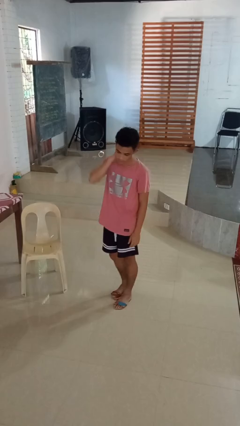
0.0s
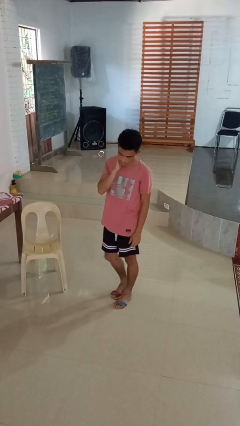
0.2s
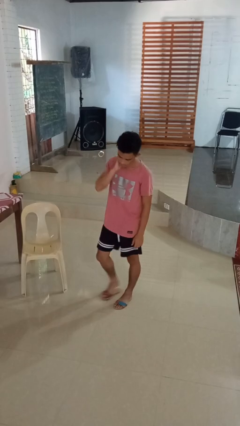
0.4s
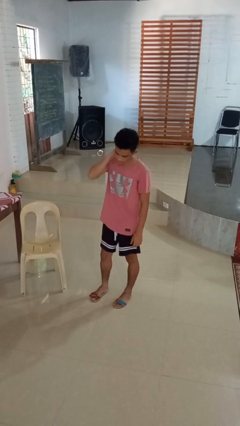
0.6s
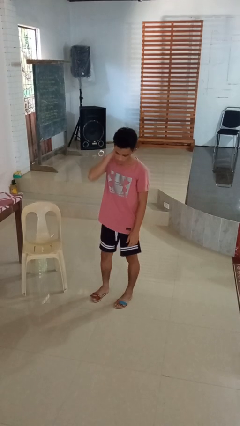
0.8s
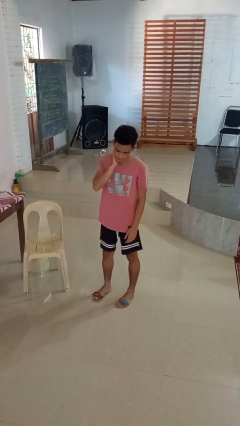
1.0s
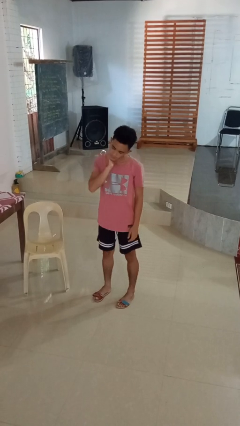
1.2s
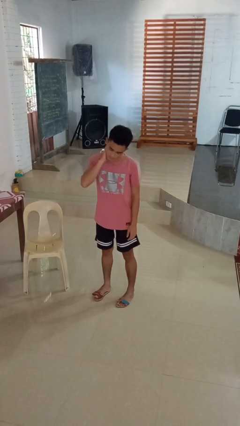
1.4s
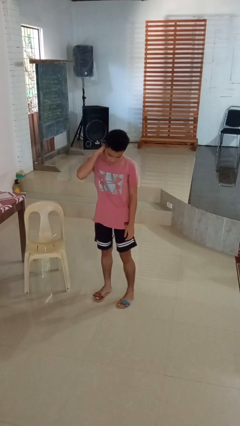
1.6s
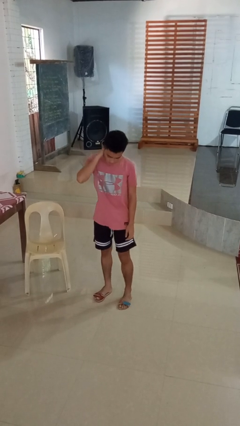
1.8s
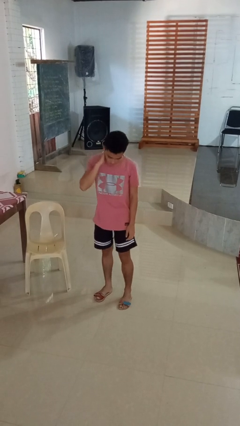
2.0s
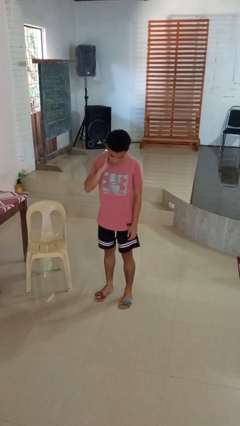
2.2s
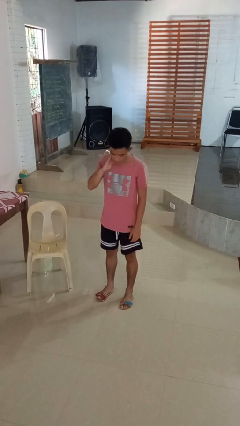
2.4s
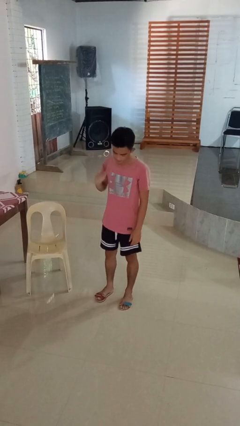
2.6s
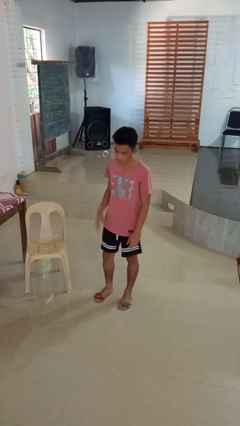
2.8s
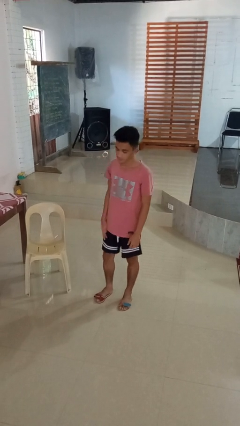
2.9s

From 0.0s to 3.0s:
person rubs neck

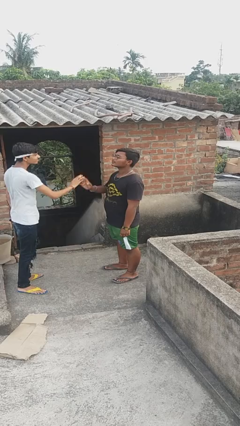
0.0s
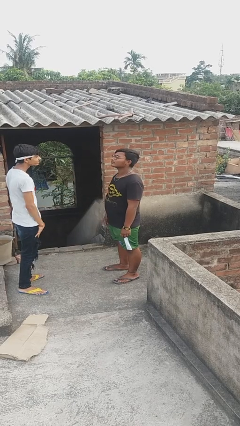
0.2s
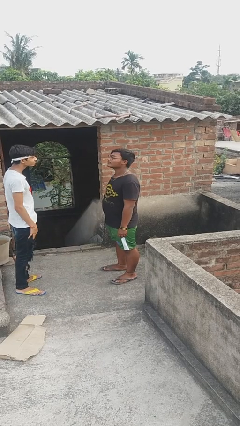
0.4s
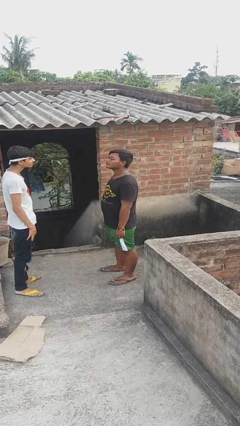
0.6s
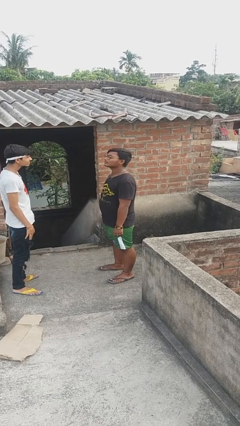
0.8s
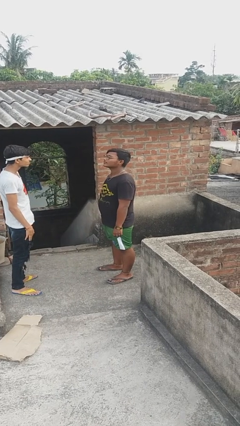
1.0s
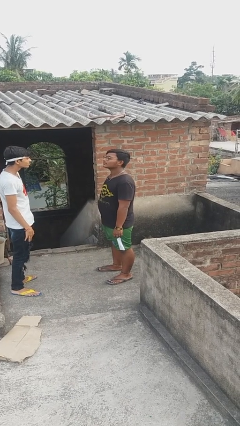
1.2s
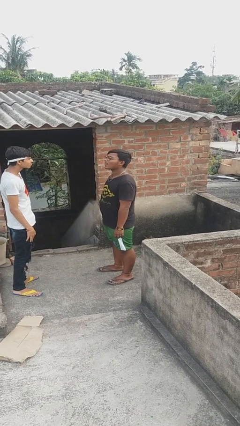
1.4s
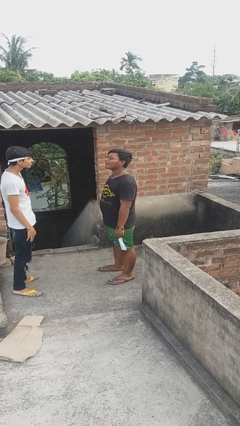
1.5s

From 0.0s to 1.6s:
person highfives hand

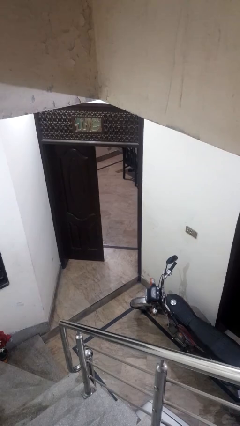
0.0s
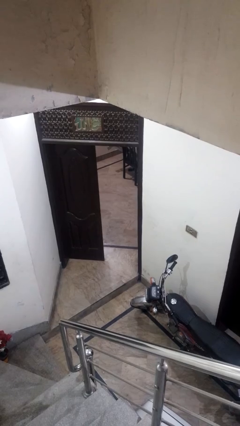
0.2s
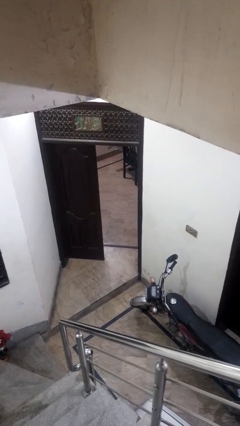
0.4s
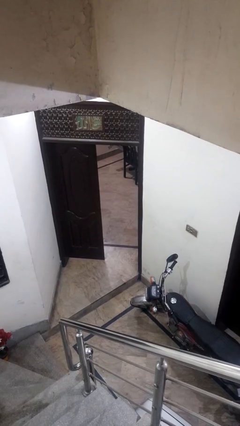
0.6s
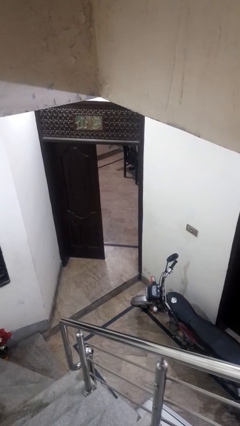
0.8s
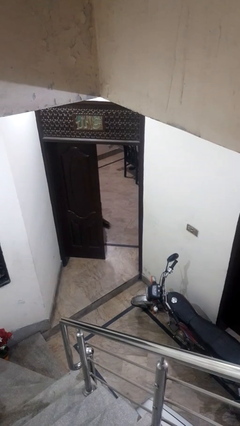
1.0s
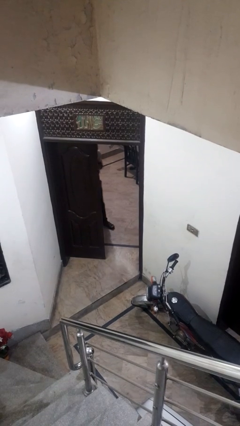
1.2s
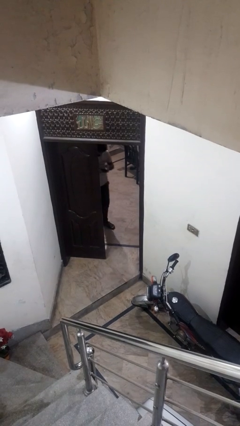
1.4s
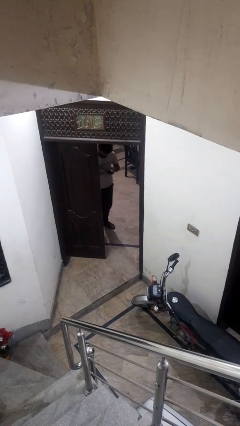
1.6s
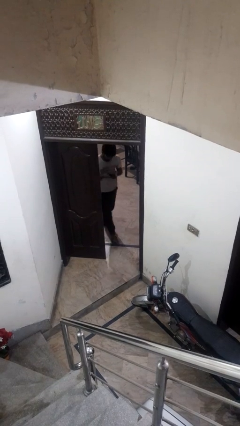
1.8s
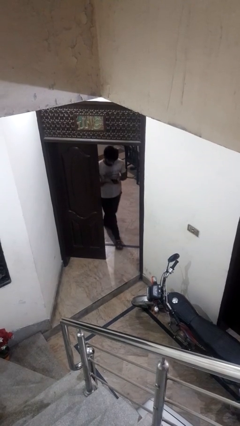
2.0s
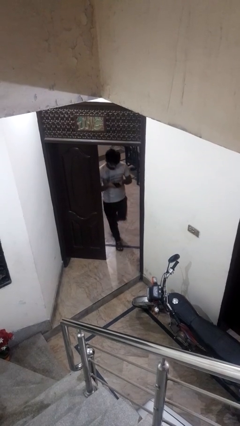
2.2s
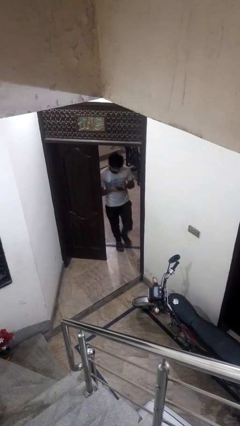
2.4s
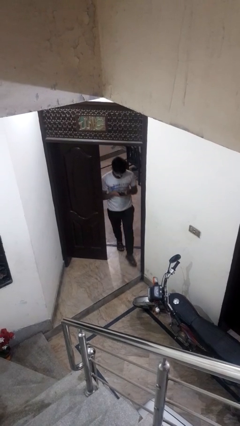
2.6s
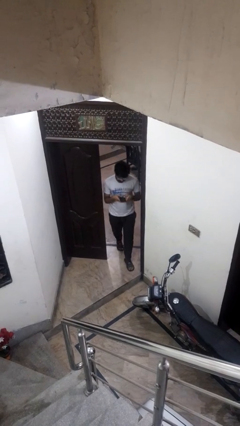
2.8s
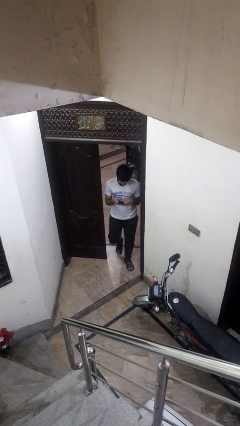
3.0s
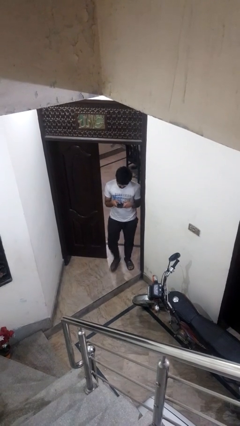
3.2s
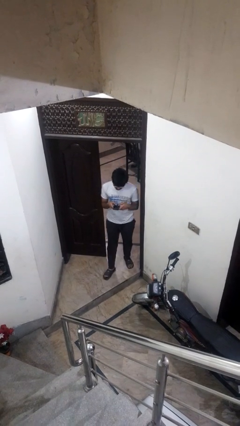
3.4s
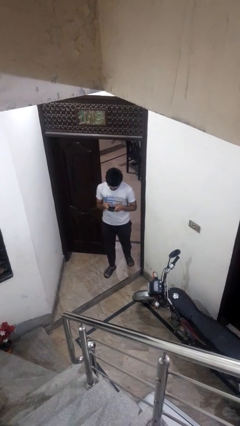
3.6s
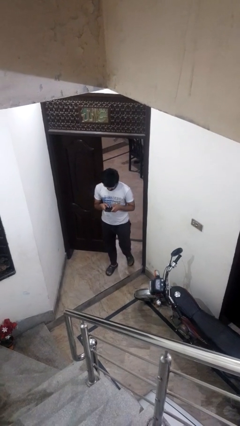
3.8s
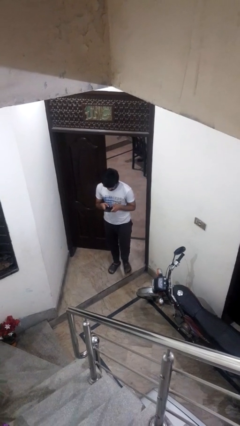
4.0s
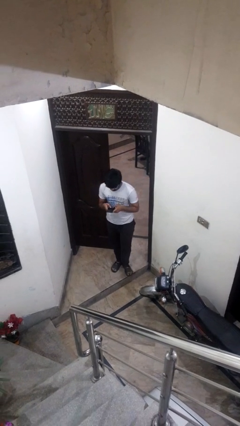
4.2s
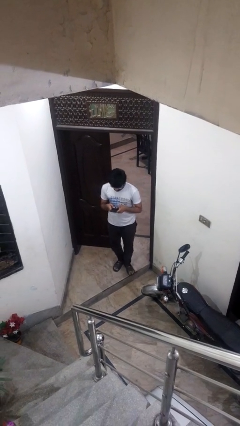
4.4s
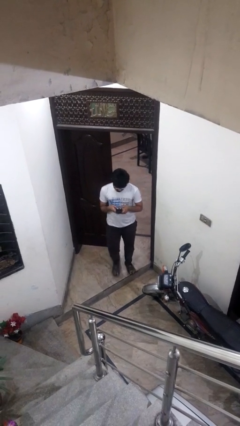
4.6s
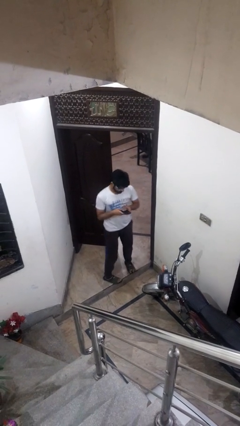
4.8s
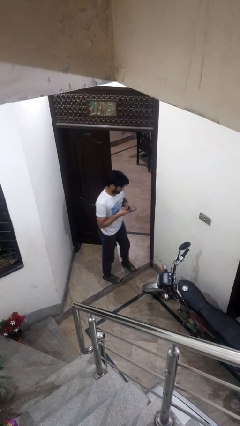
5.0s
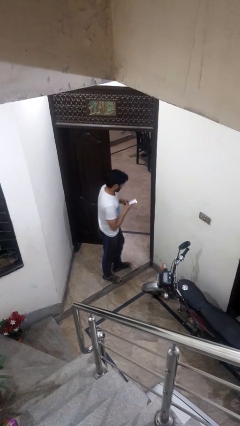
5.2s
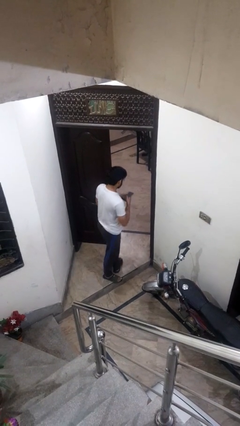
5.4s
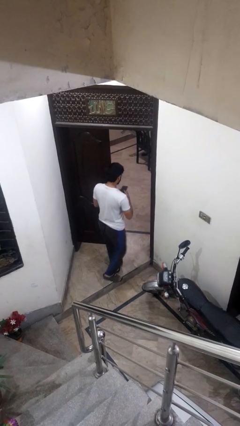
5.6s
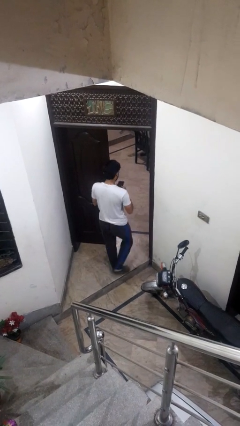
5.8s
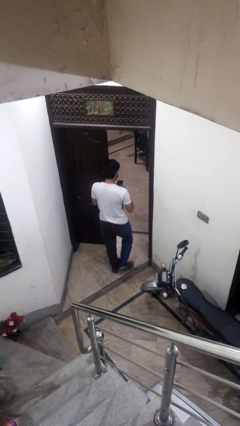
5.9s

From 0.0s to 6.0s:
person enters scene through structure

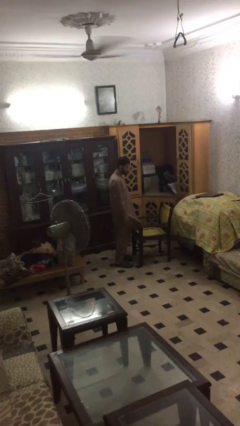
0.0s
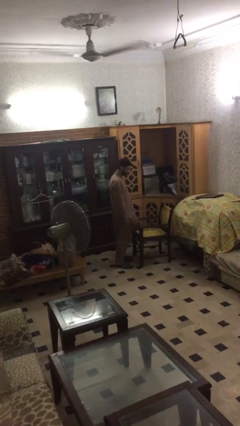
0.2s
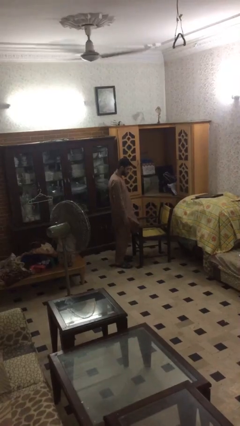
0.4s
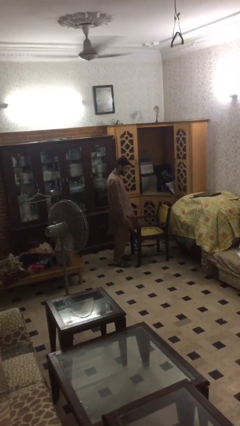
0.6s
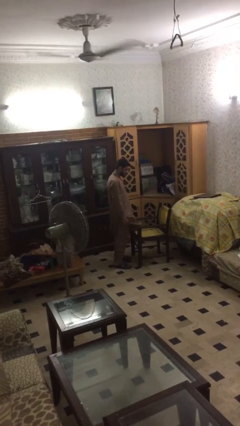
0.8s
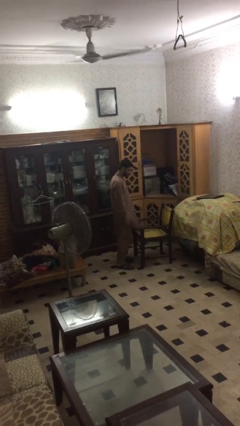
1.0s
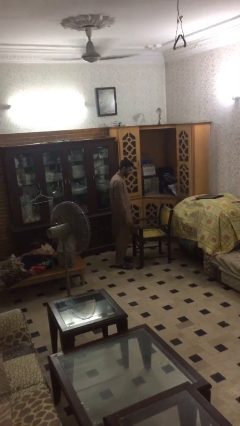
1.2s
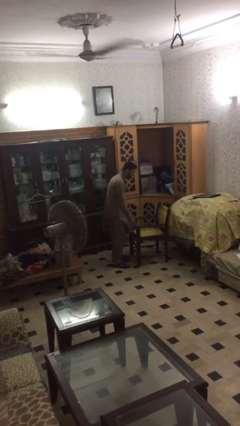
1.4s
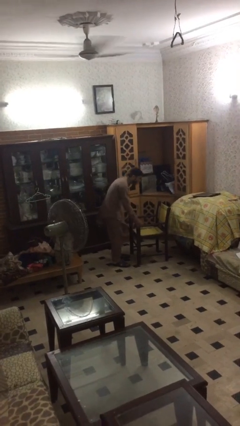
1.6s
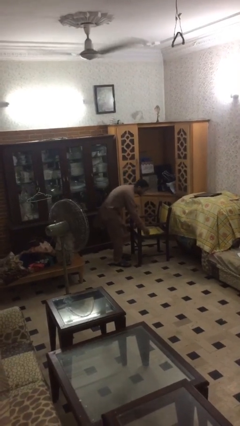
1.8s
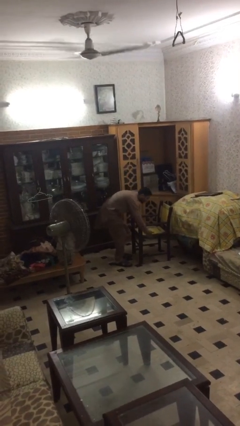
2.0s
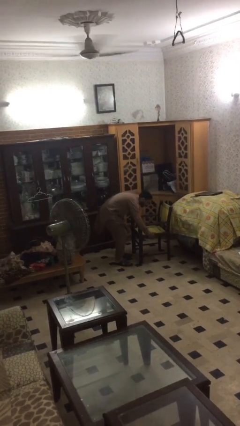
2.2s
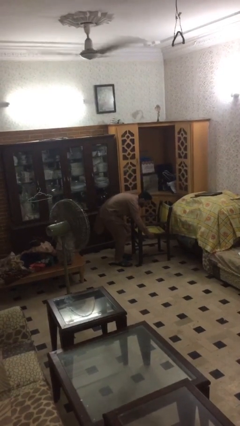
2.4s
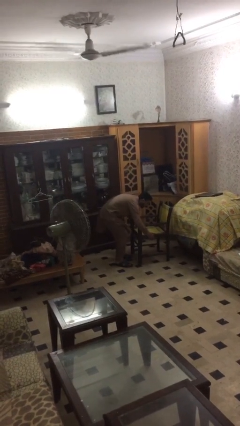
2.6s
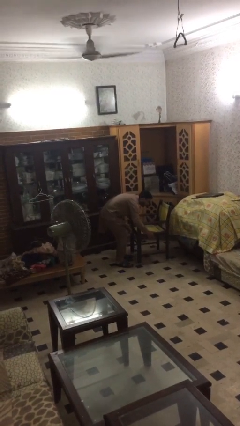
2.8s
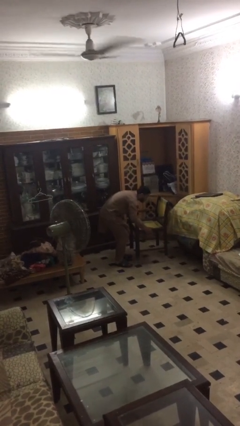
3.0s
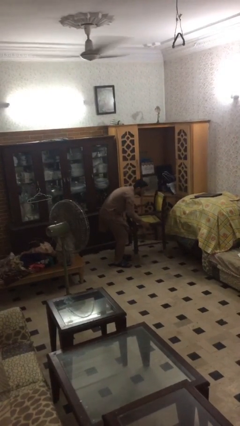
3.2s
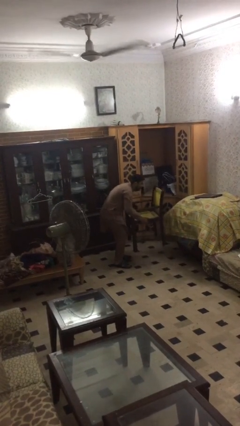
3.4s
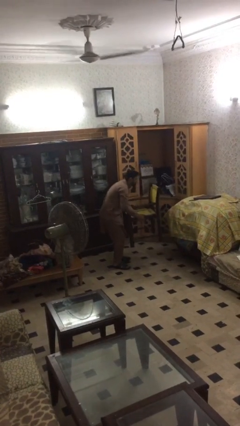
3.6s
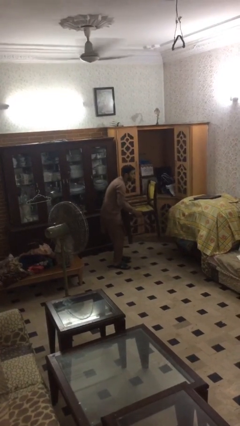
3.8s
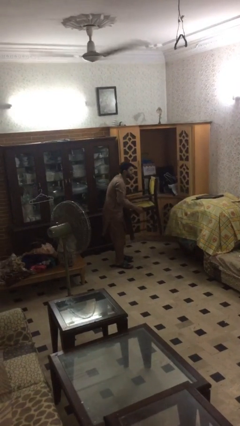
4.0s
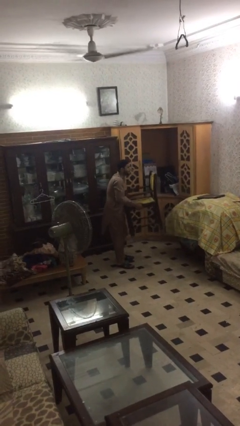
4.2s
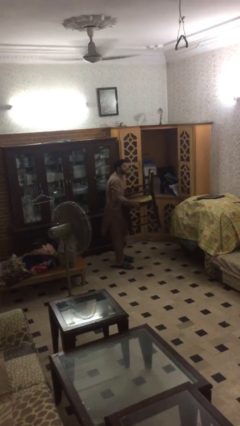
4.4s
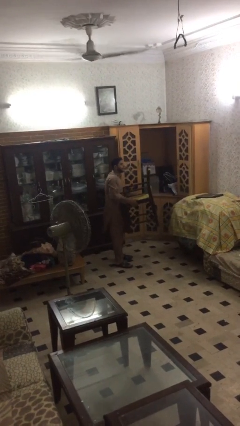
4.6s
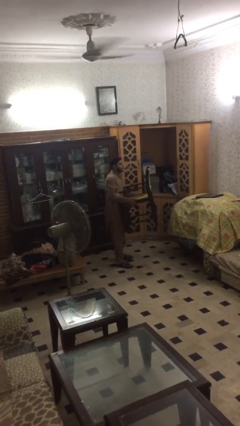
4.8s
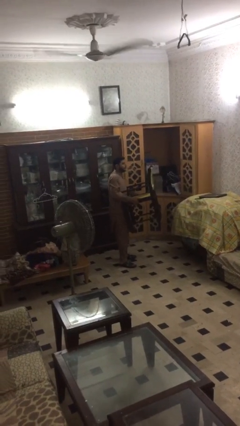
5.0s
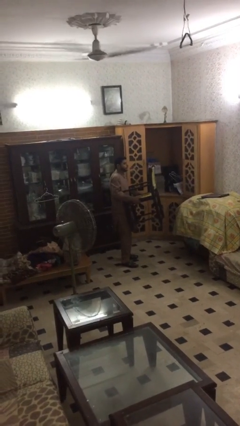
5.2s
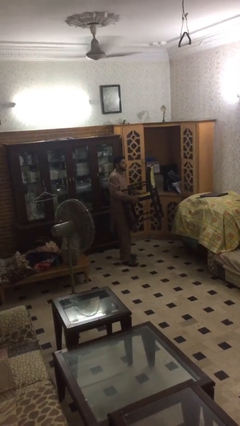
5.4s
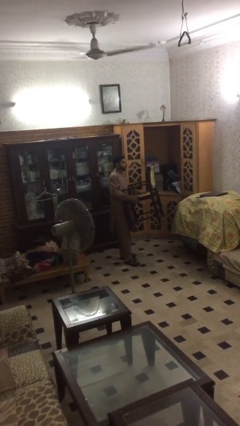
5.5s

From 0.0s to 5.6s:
person carries heavy object

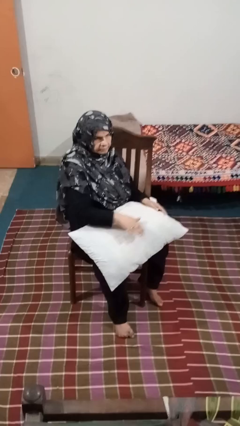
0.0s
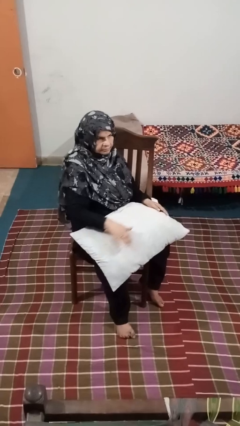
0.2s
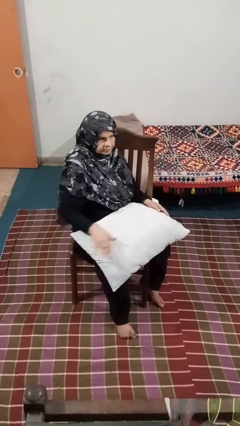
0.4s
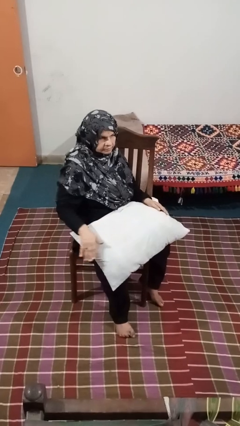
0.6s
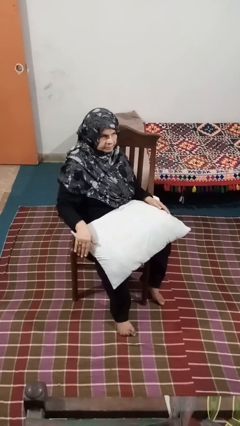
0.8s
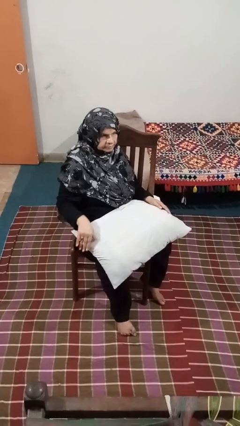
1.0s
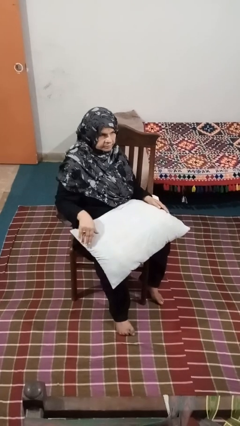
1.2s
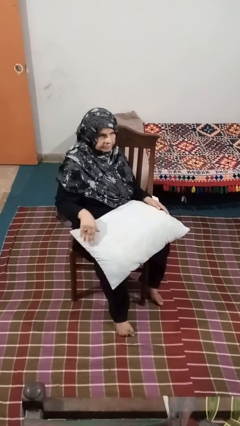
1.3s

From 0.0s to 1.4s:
person waves hand over object
